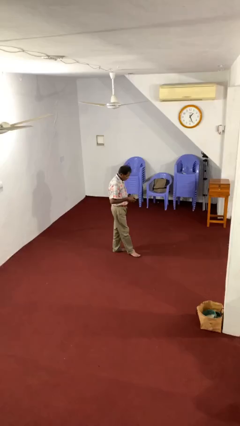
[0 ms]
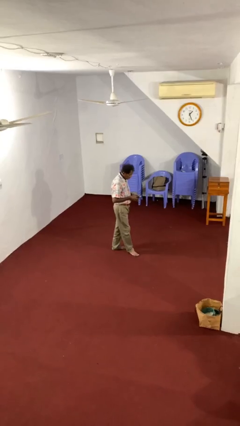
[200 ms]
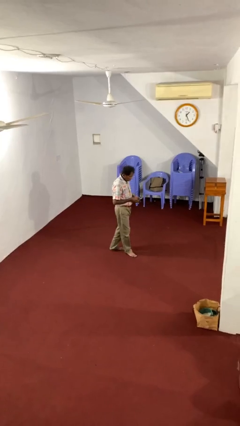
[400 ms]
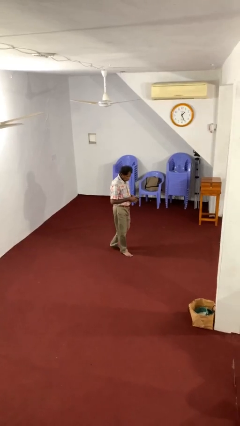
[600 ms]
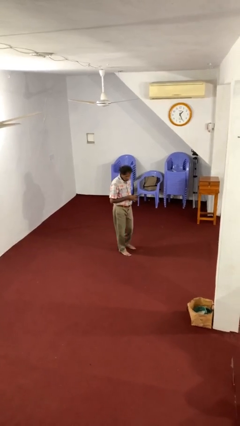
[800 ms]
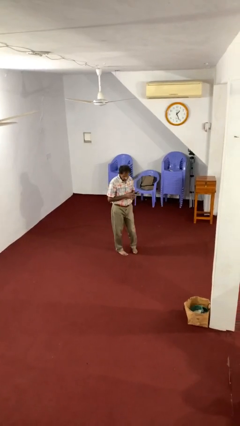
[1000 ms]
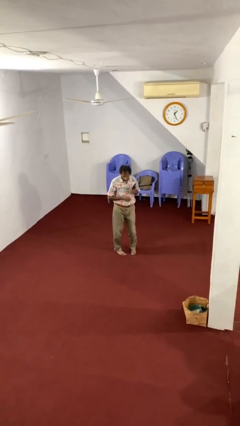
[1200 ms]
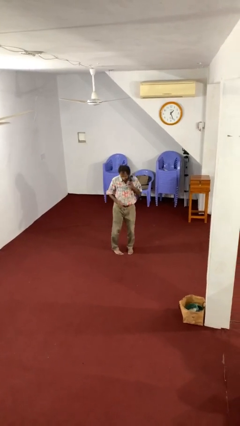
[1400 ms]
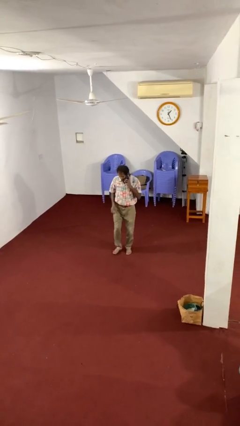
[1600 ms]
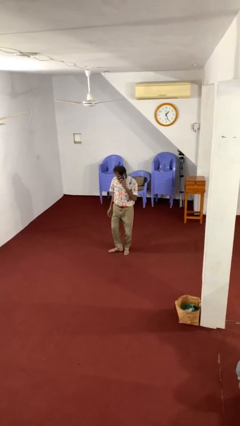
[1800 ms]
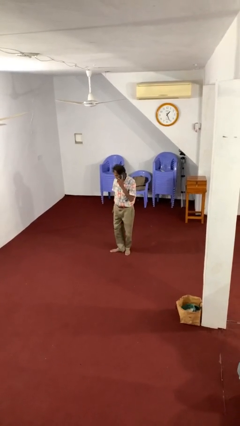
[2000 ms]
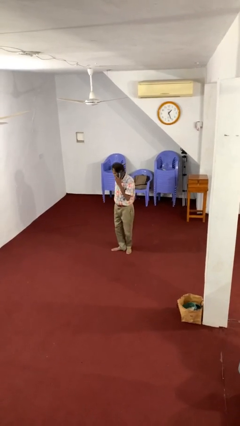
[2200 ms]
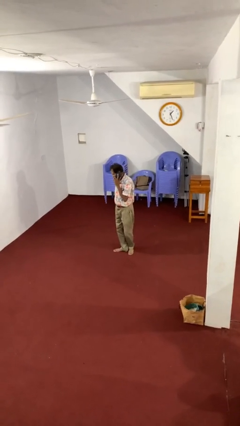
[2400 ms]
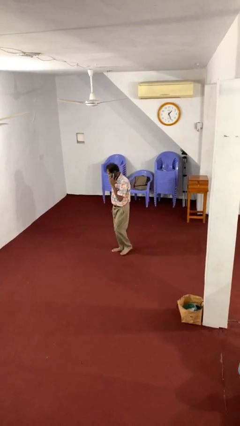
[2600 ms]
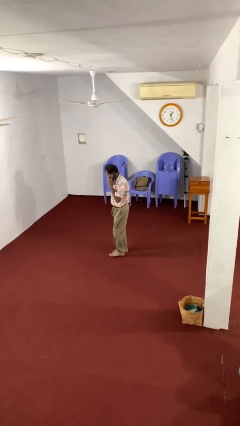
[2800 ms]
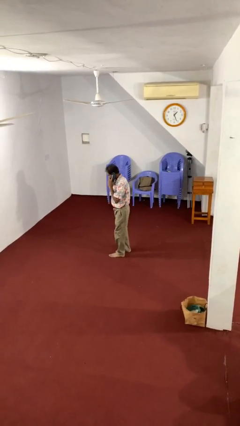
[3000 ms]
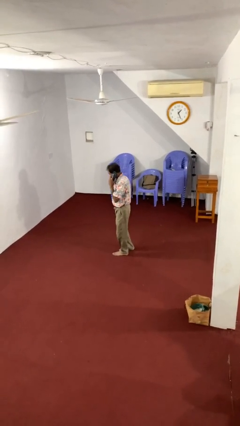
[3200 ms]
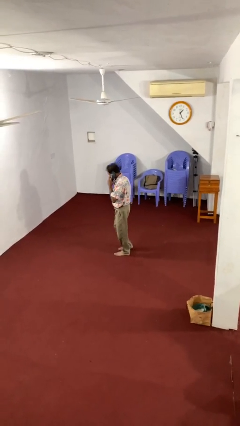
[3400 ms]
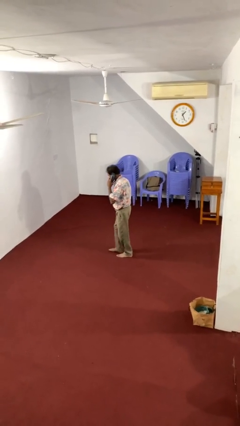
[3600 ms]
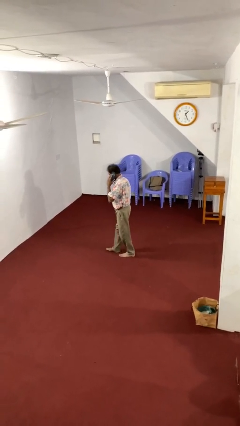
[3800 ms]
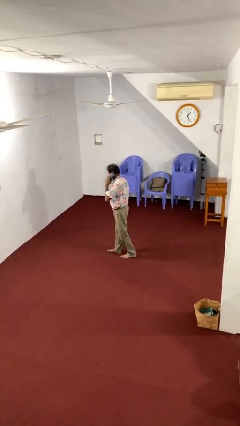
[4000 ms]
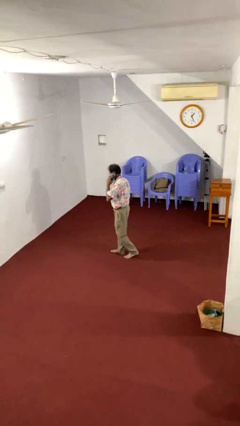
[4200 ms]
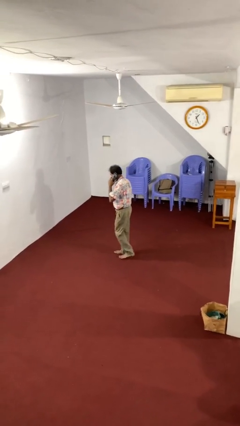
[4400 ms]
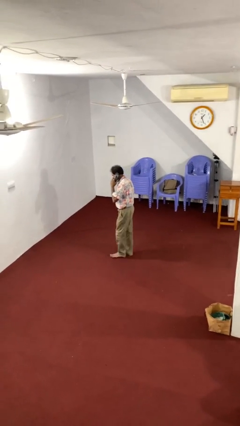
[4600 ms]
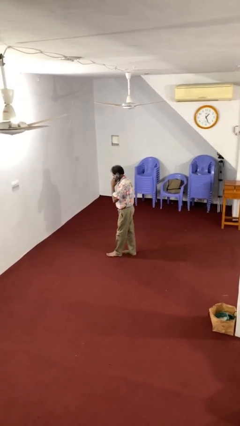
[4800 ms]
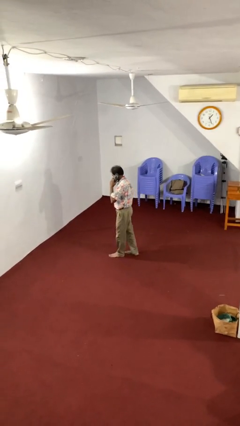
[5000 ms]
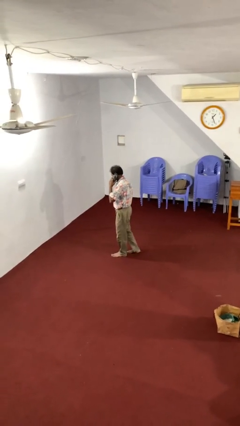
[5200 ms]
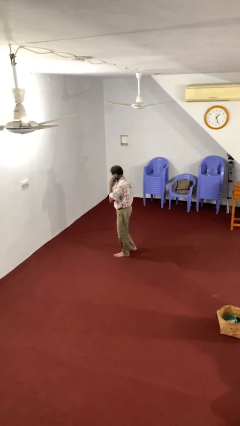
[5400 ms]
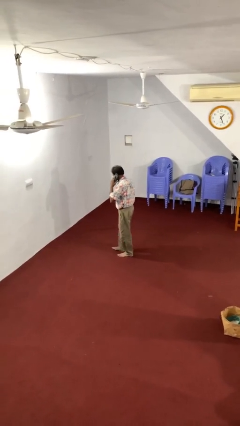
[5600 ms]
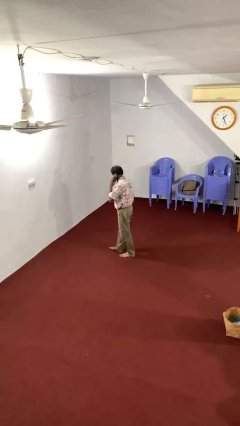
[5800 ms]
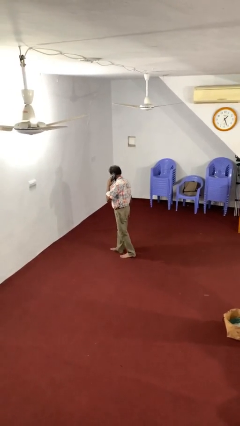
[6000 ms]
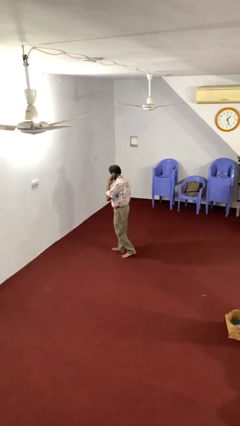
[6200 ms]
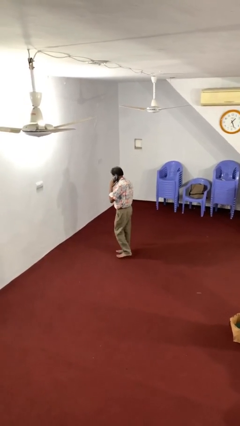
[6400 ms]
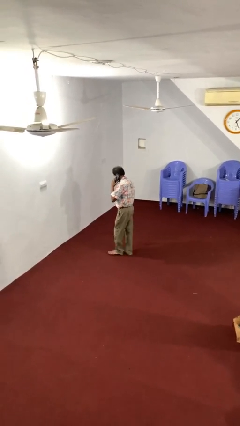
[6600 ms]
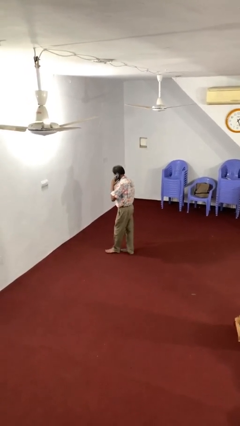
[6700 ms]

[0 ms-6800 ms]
person talks on phone

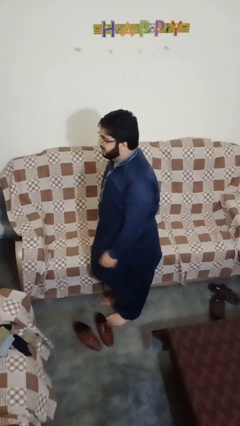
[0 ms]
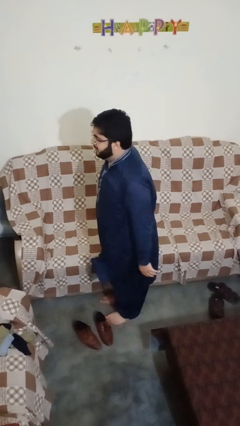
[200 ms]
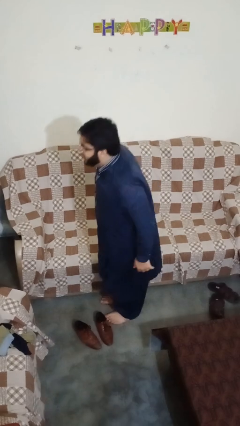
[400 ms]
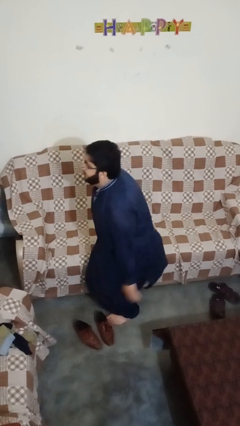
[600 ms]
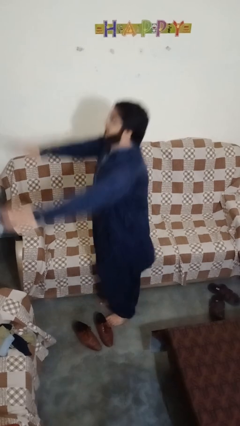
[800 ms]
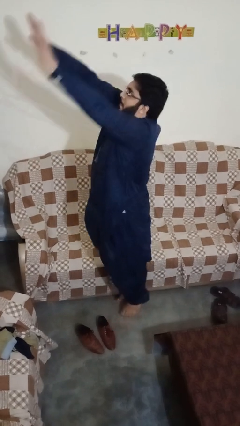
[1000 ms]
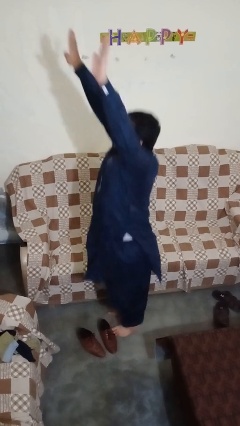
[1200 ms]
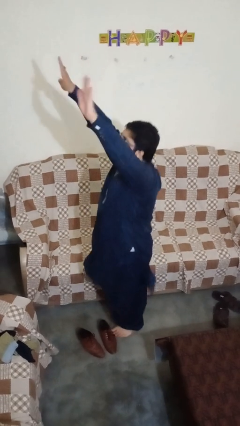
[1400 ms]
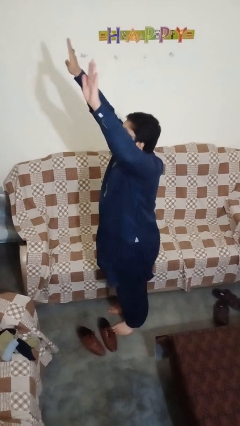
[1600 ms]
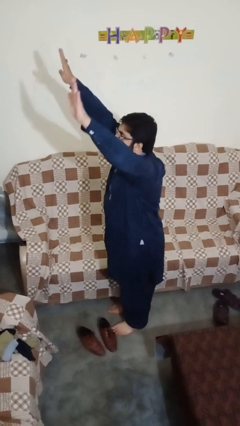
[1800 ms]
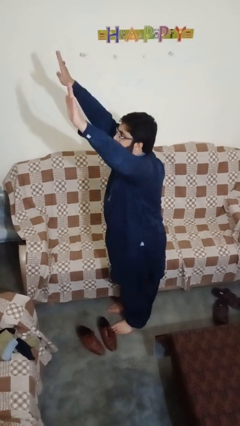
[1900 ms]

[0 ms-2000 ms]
person jumps

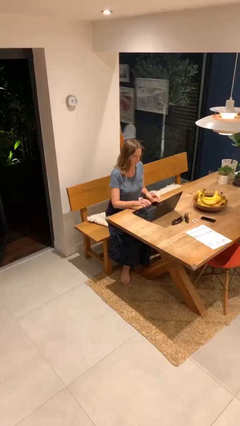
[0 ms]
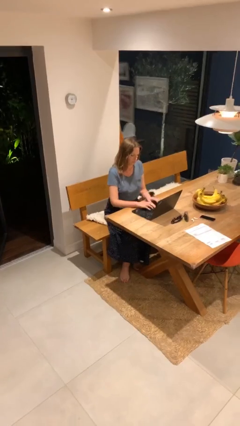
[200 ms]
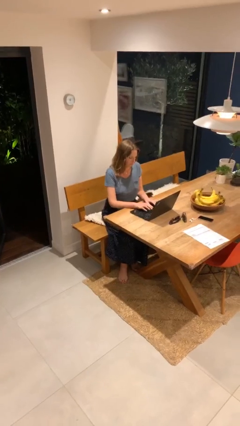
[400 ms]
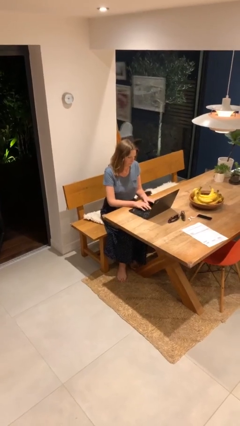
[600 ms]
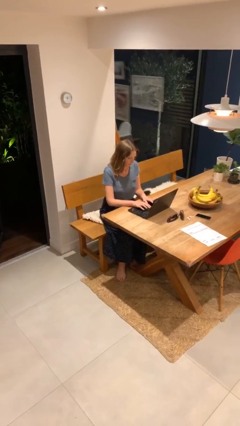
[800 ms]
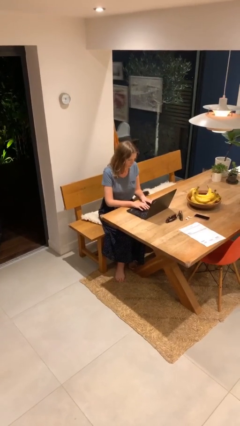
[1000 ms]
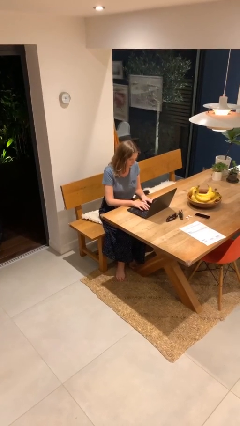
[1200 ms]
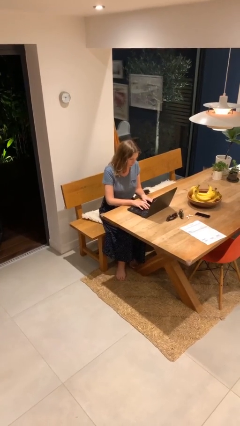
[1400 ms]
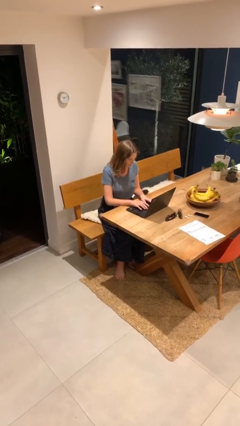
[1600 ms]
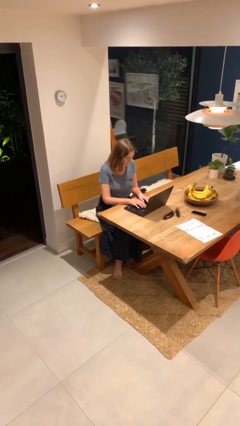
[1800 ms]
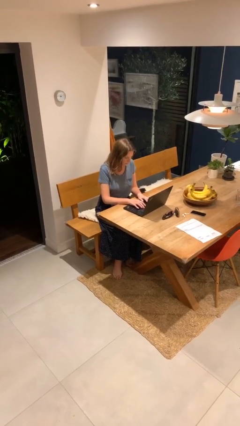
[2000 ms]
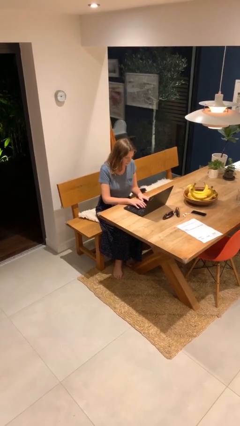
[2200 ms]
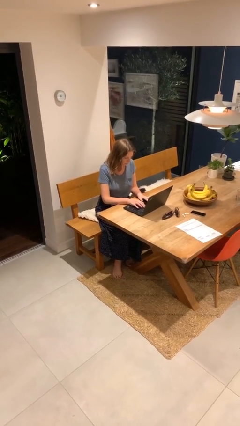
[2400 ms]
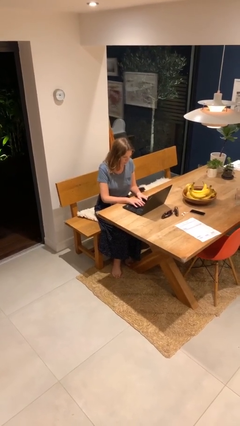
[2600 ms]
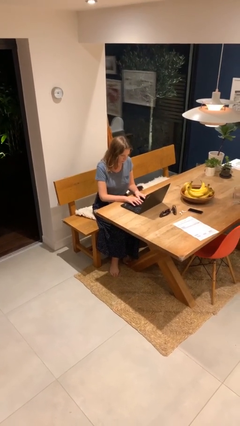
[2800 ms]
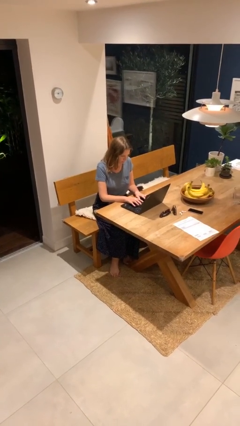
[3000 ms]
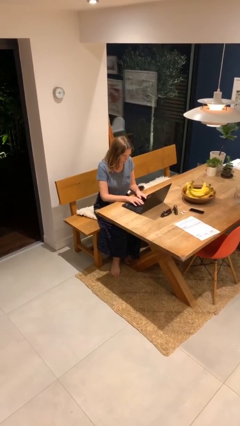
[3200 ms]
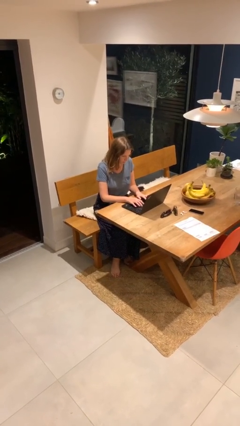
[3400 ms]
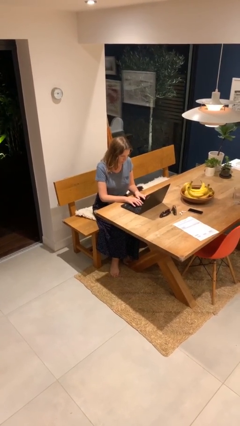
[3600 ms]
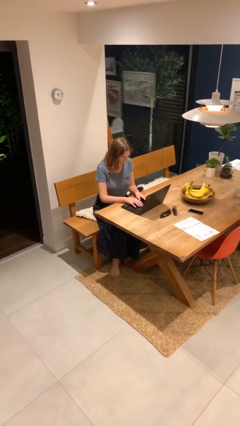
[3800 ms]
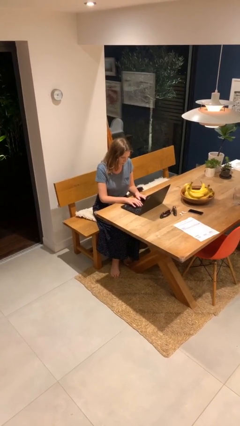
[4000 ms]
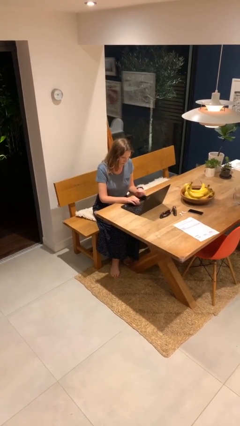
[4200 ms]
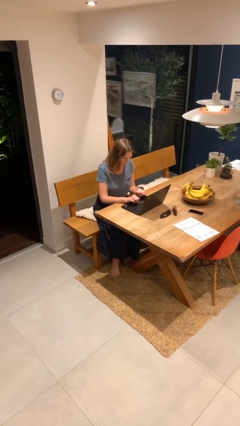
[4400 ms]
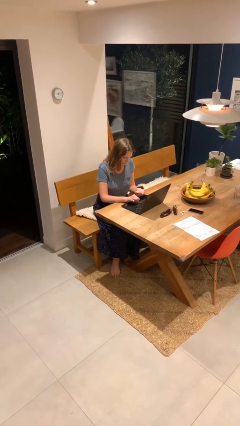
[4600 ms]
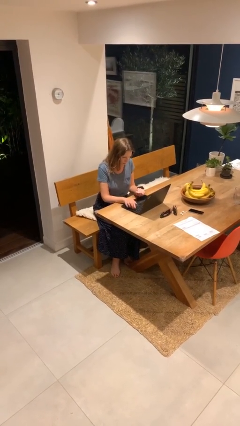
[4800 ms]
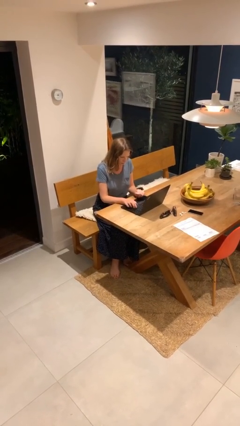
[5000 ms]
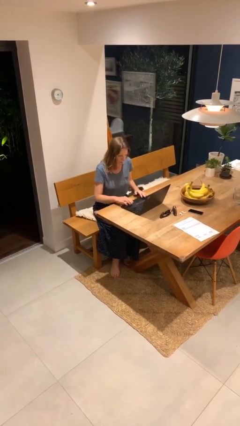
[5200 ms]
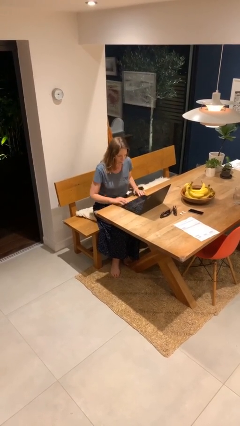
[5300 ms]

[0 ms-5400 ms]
person interacts with laptop

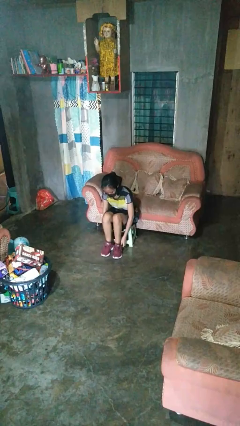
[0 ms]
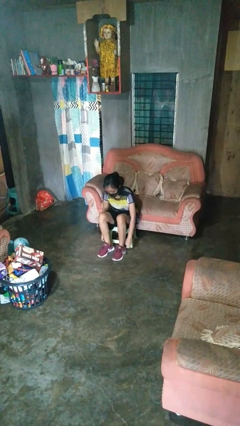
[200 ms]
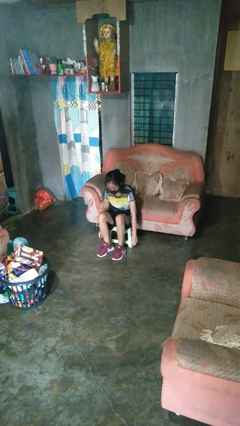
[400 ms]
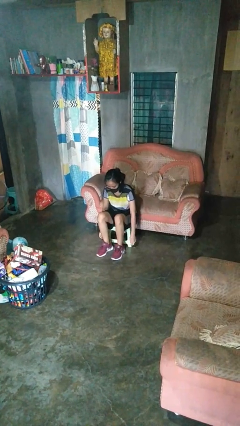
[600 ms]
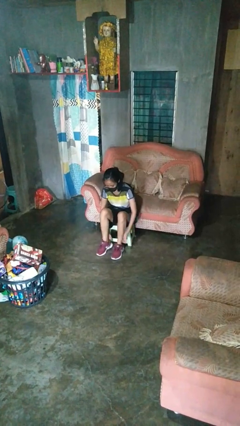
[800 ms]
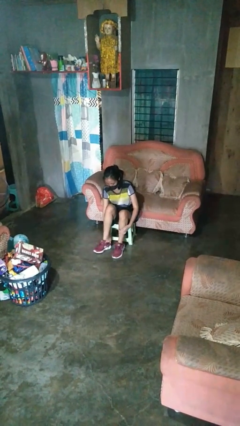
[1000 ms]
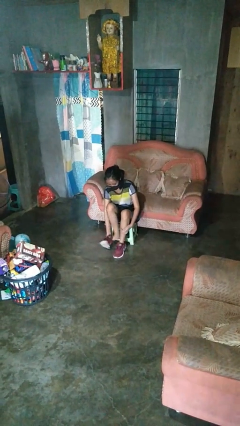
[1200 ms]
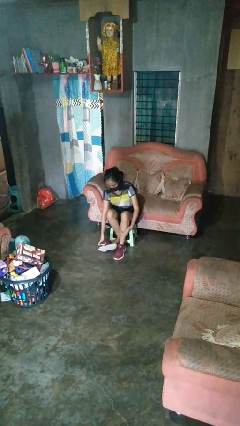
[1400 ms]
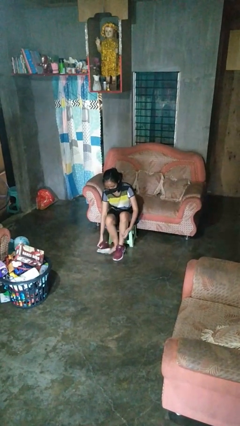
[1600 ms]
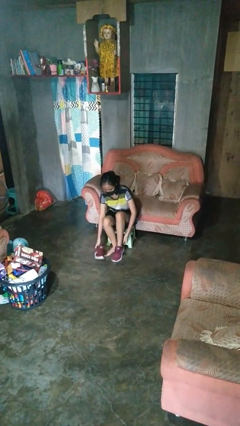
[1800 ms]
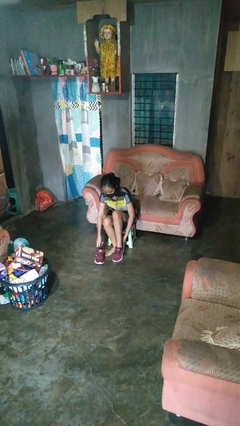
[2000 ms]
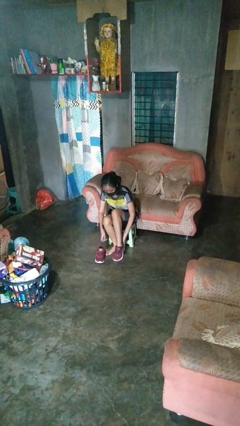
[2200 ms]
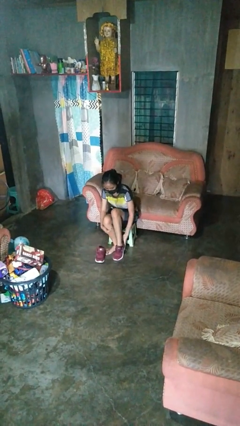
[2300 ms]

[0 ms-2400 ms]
person takes off shoes

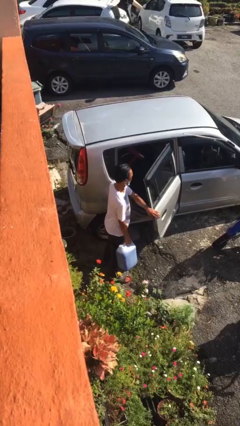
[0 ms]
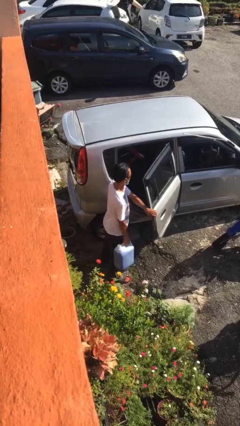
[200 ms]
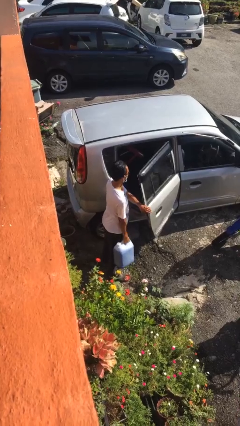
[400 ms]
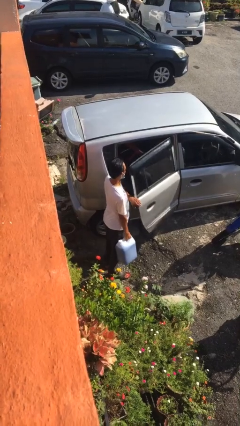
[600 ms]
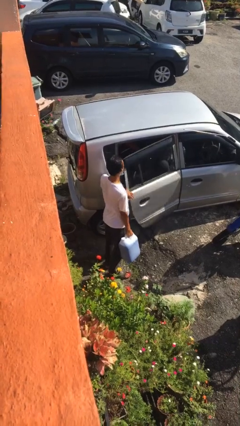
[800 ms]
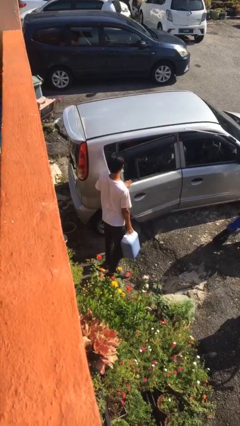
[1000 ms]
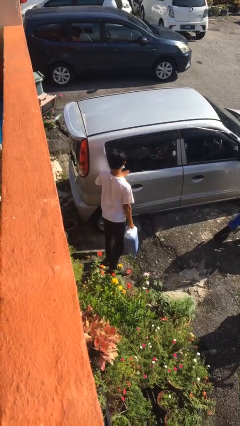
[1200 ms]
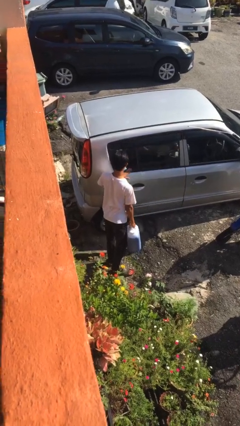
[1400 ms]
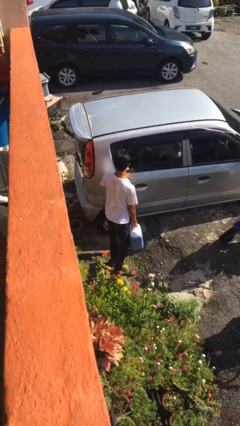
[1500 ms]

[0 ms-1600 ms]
person closes car door
